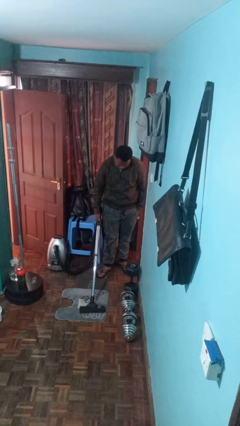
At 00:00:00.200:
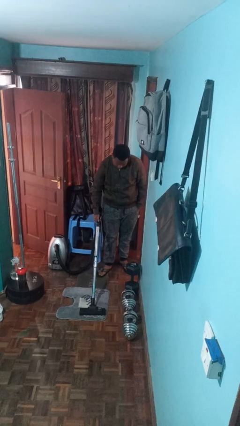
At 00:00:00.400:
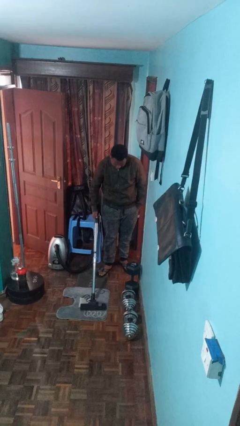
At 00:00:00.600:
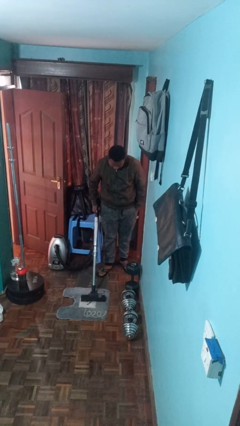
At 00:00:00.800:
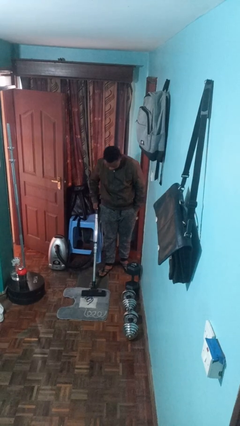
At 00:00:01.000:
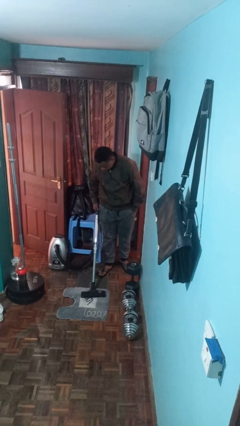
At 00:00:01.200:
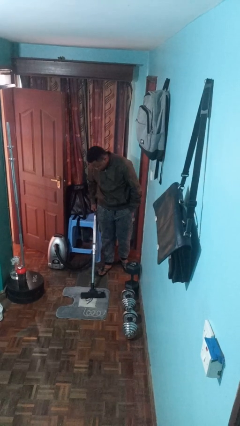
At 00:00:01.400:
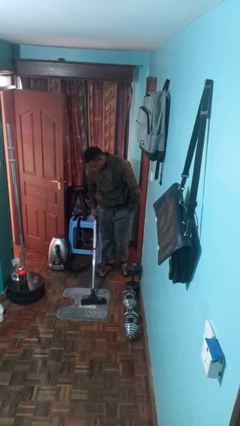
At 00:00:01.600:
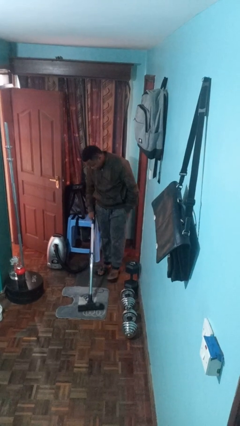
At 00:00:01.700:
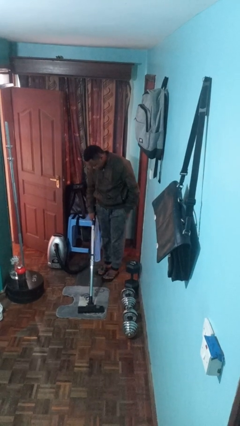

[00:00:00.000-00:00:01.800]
person vacuums carpet

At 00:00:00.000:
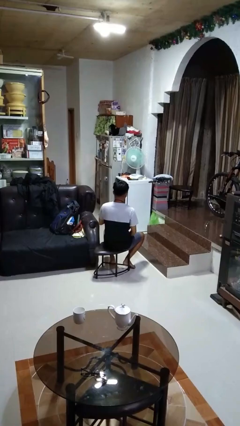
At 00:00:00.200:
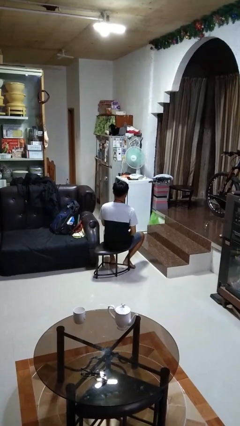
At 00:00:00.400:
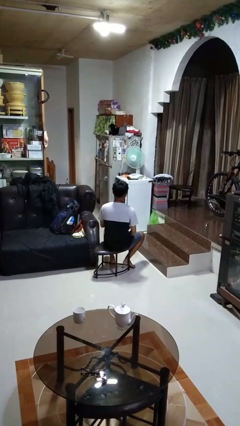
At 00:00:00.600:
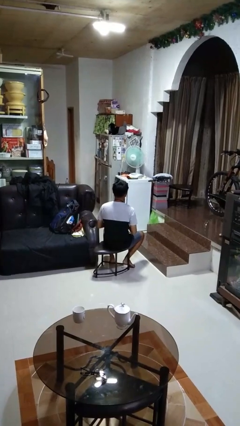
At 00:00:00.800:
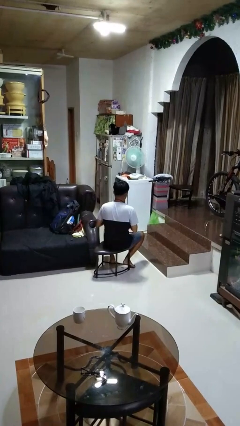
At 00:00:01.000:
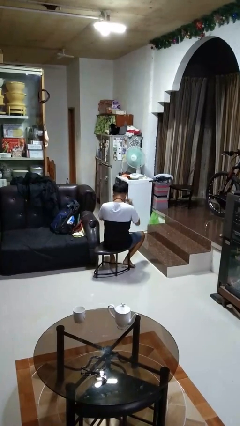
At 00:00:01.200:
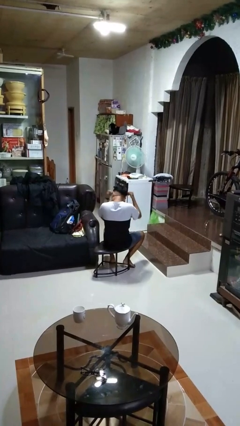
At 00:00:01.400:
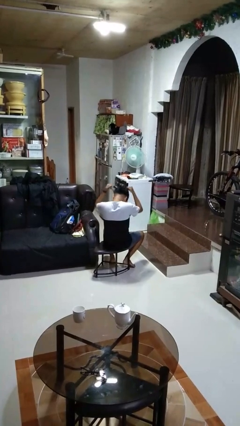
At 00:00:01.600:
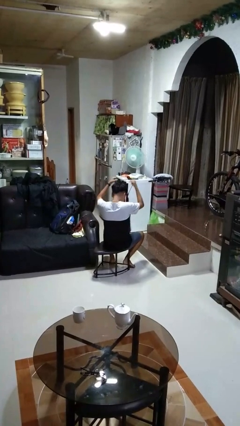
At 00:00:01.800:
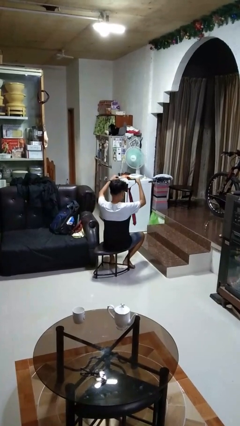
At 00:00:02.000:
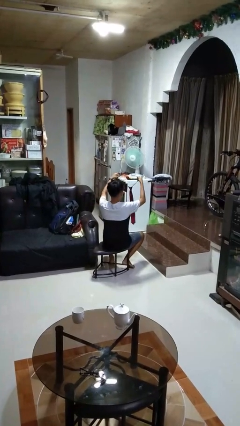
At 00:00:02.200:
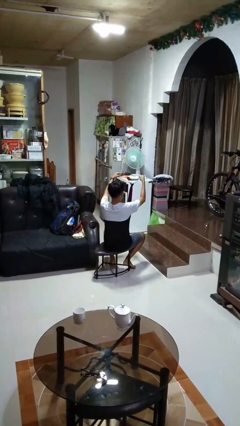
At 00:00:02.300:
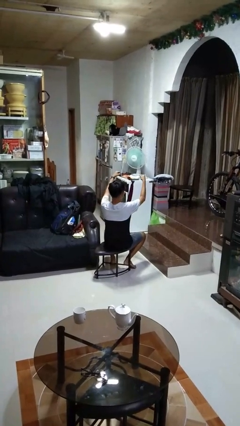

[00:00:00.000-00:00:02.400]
person takes off necktie

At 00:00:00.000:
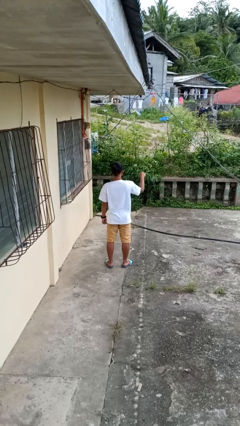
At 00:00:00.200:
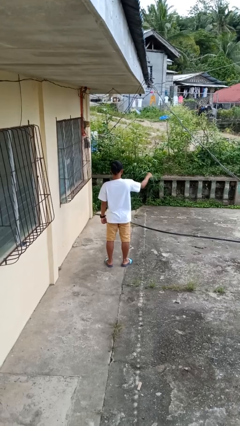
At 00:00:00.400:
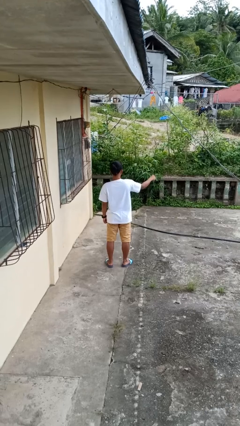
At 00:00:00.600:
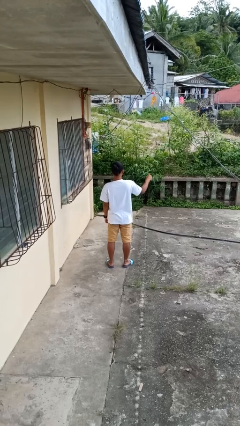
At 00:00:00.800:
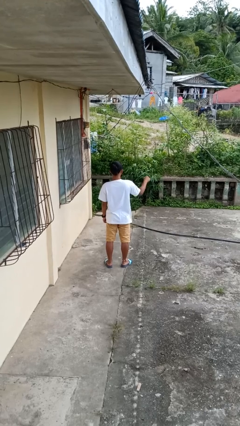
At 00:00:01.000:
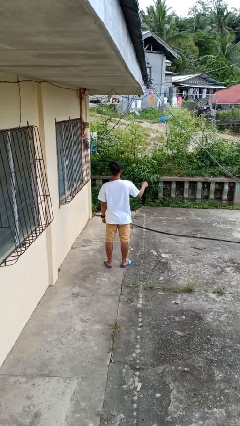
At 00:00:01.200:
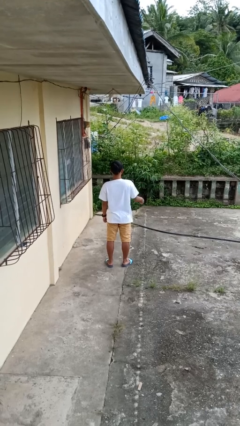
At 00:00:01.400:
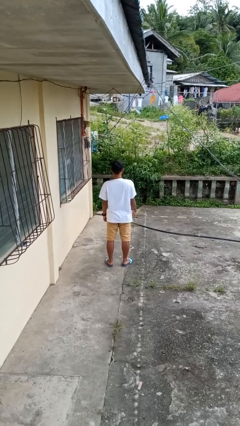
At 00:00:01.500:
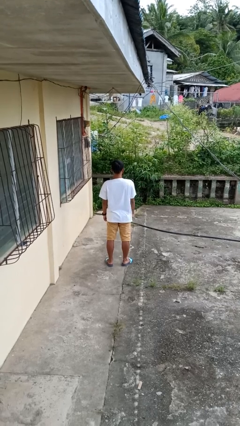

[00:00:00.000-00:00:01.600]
person punches

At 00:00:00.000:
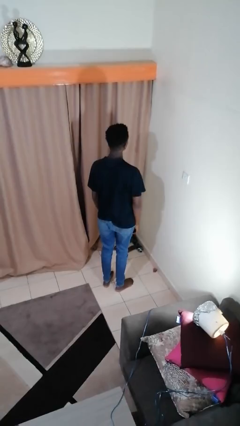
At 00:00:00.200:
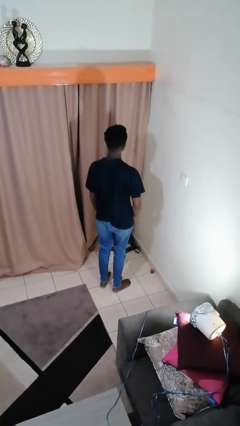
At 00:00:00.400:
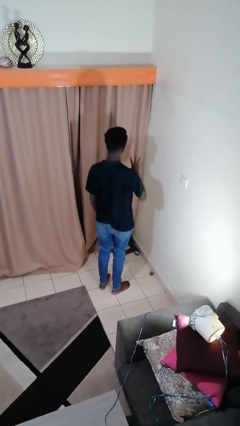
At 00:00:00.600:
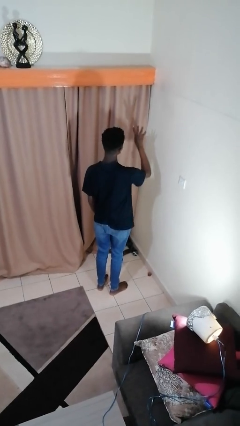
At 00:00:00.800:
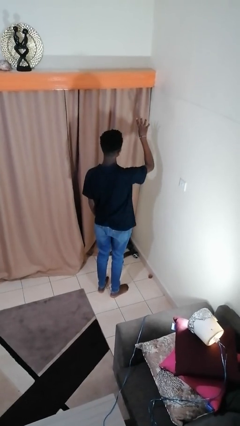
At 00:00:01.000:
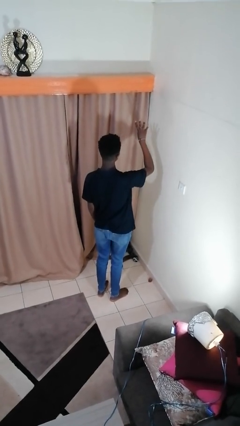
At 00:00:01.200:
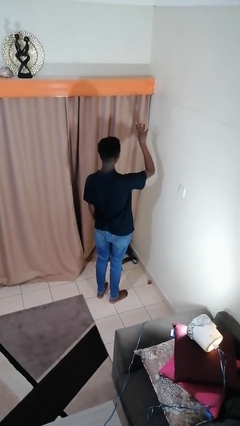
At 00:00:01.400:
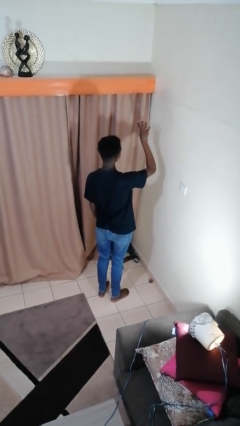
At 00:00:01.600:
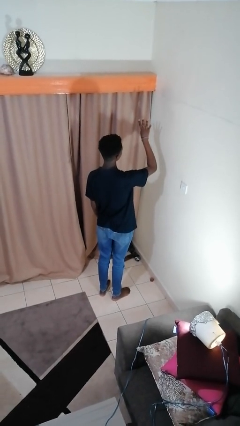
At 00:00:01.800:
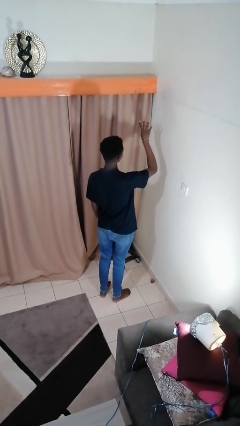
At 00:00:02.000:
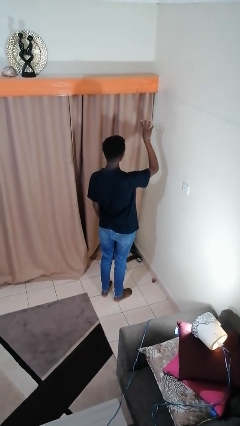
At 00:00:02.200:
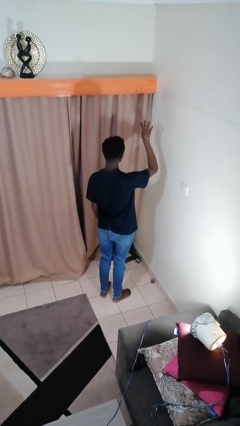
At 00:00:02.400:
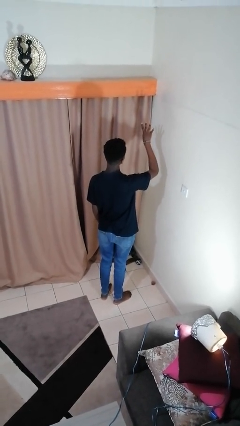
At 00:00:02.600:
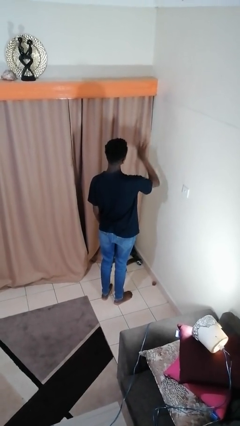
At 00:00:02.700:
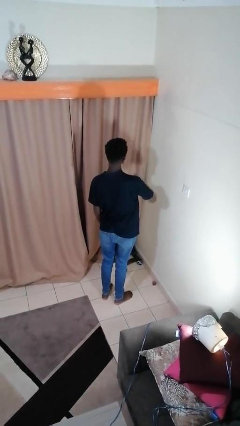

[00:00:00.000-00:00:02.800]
person gestures number four

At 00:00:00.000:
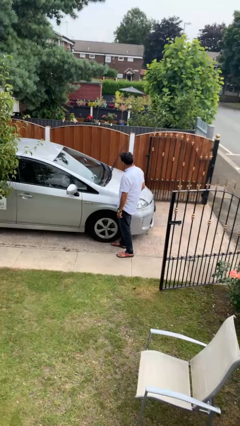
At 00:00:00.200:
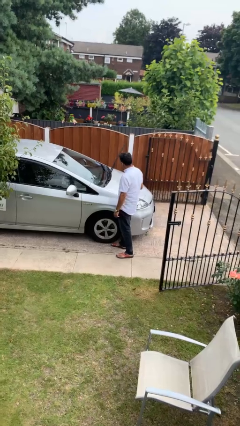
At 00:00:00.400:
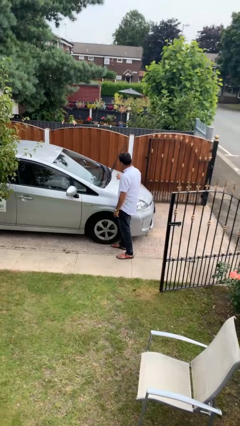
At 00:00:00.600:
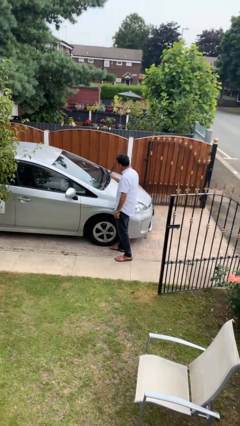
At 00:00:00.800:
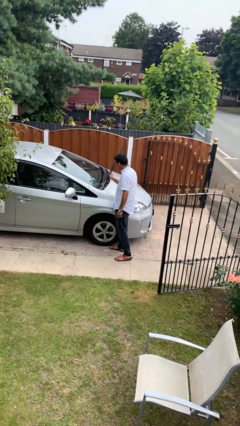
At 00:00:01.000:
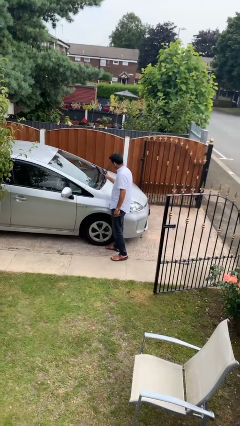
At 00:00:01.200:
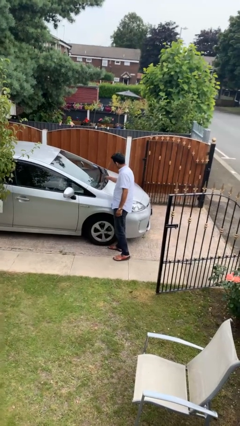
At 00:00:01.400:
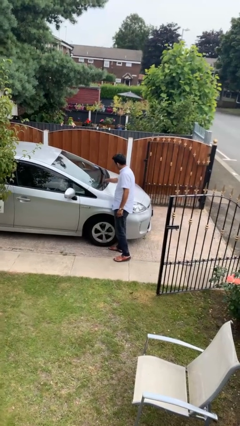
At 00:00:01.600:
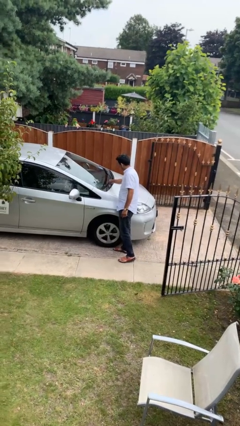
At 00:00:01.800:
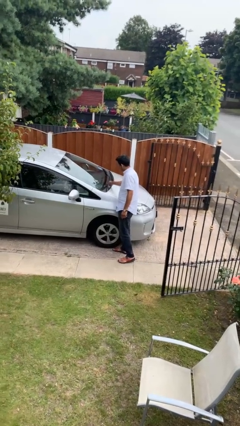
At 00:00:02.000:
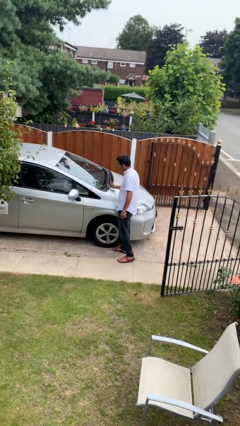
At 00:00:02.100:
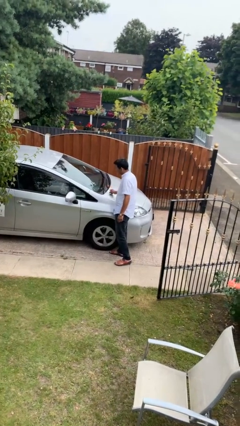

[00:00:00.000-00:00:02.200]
person flips down car wipers

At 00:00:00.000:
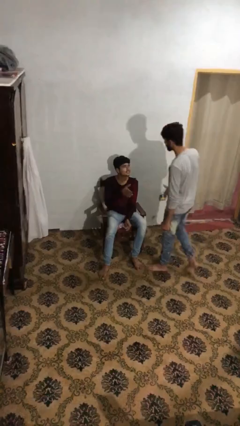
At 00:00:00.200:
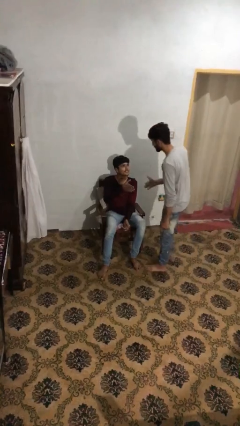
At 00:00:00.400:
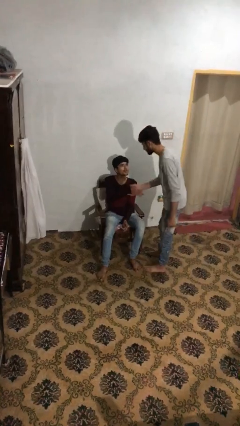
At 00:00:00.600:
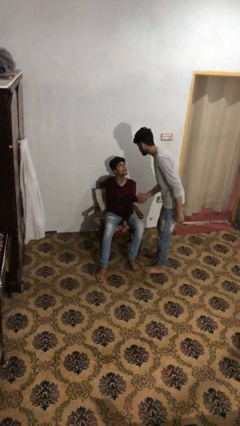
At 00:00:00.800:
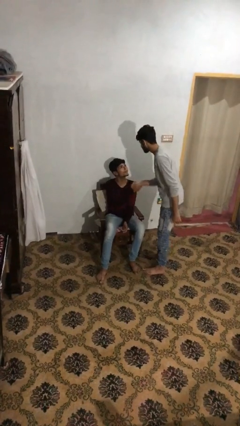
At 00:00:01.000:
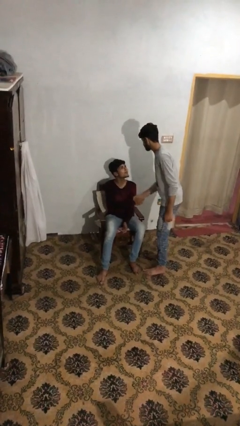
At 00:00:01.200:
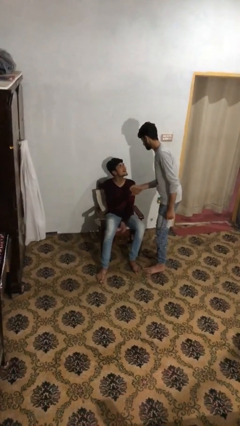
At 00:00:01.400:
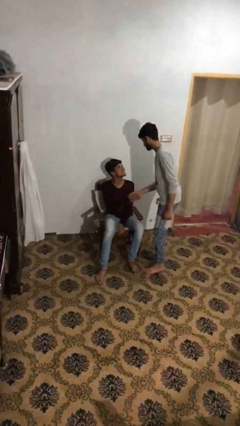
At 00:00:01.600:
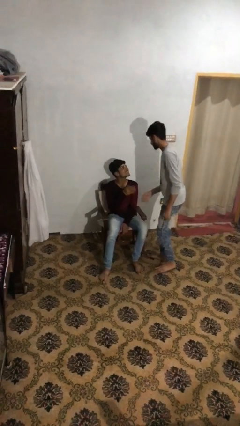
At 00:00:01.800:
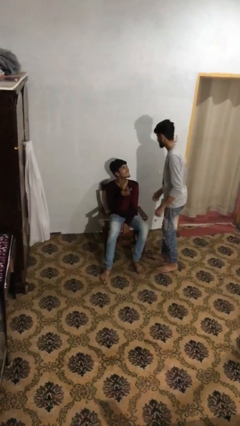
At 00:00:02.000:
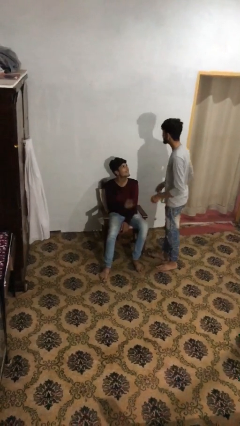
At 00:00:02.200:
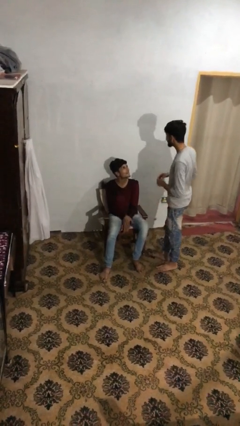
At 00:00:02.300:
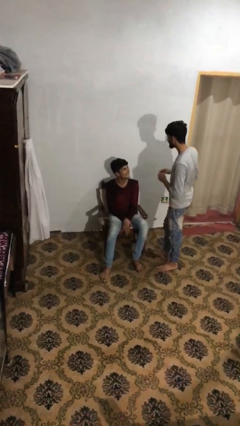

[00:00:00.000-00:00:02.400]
person shakes hand

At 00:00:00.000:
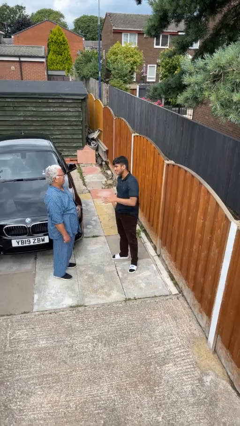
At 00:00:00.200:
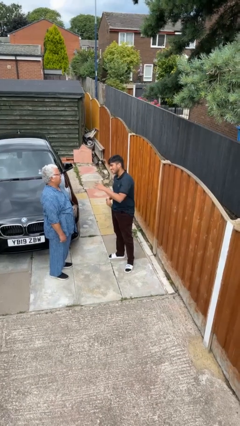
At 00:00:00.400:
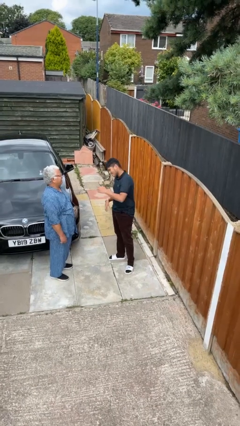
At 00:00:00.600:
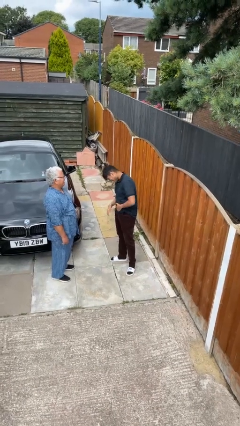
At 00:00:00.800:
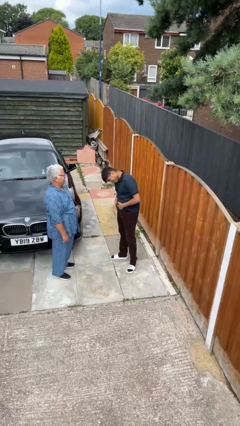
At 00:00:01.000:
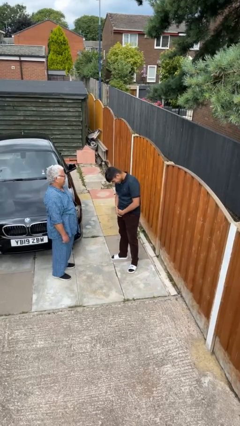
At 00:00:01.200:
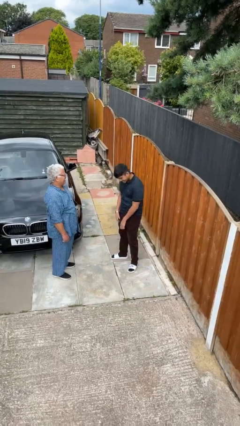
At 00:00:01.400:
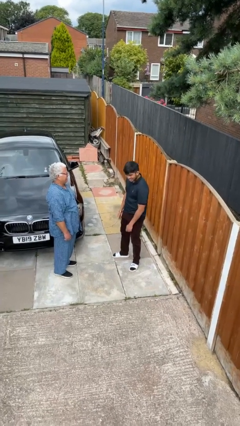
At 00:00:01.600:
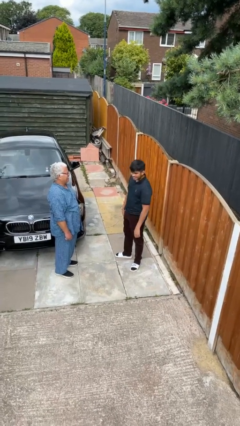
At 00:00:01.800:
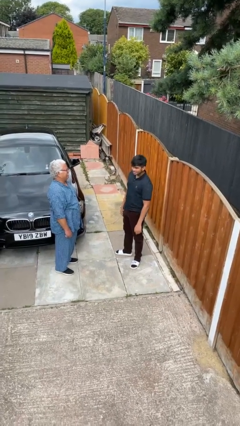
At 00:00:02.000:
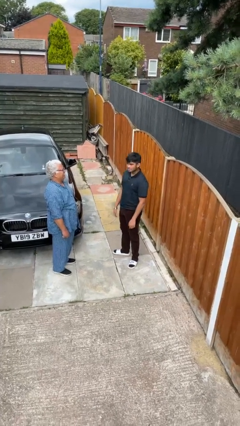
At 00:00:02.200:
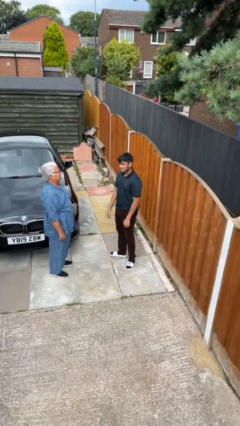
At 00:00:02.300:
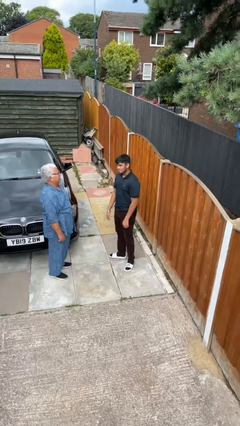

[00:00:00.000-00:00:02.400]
person laughs with person

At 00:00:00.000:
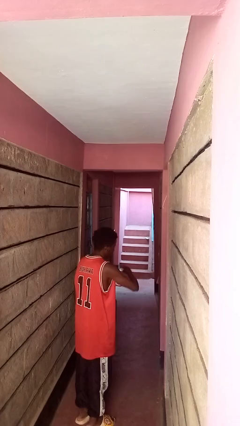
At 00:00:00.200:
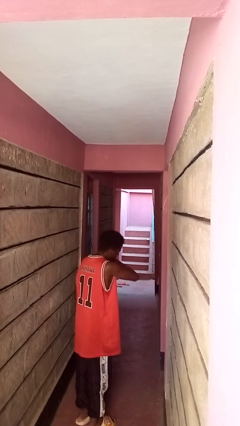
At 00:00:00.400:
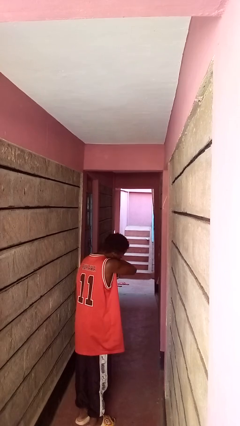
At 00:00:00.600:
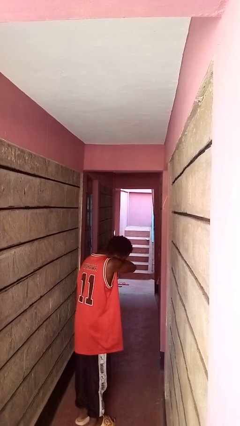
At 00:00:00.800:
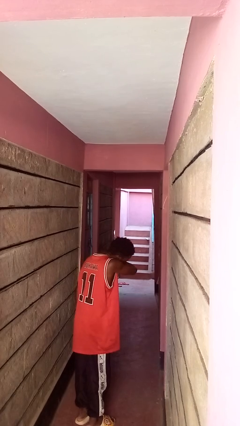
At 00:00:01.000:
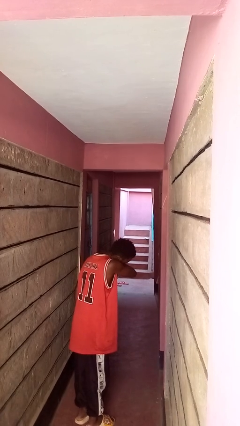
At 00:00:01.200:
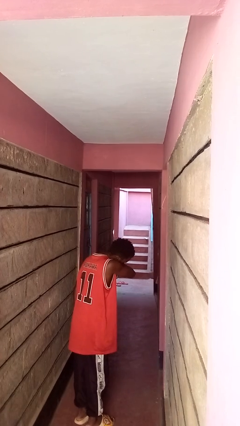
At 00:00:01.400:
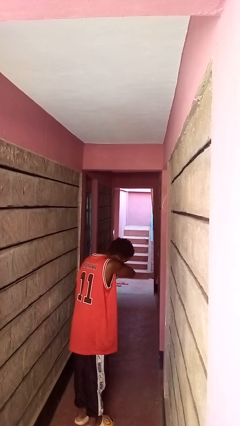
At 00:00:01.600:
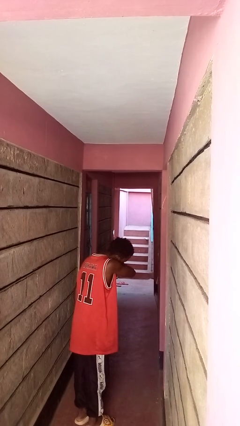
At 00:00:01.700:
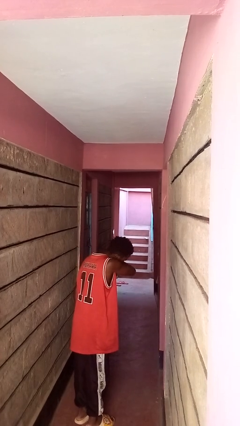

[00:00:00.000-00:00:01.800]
person sneezes into arm
